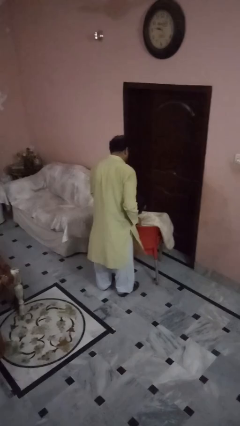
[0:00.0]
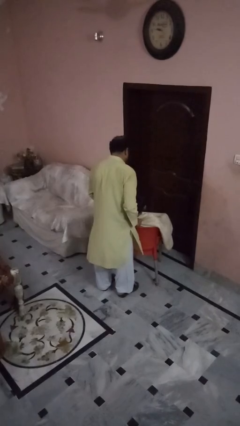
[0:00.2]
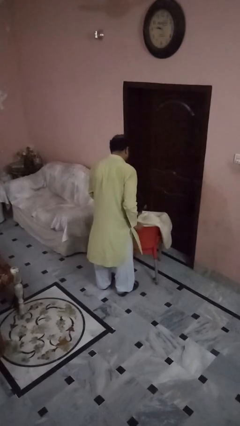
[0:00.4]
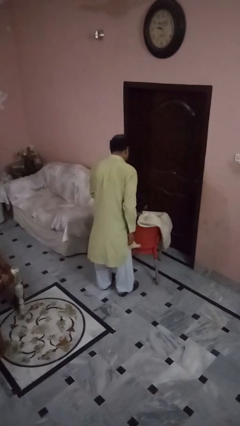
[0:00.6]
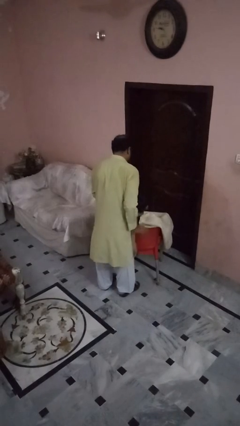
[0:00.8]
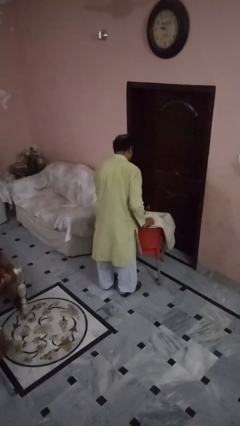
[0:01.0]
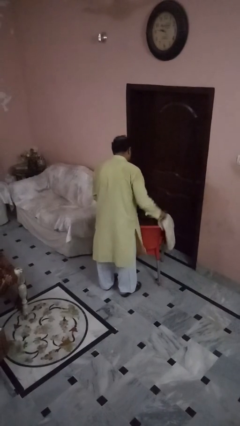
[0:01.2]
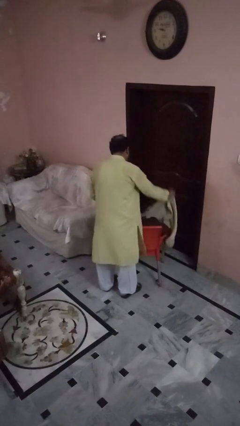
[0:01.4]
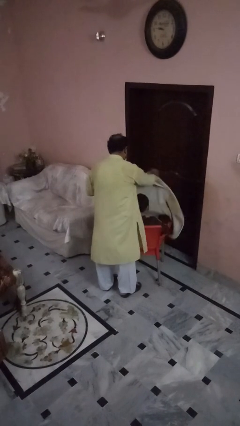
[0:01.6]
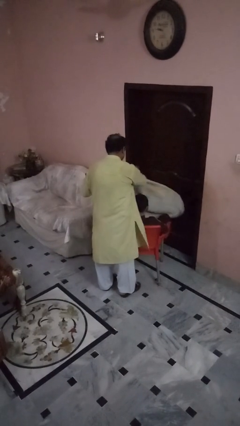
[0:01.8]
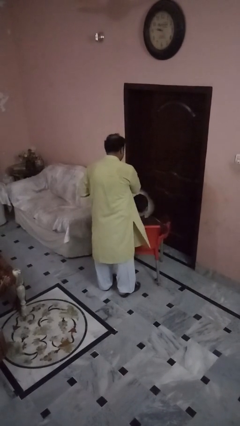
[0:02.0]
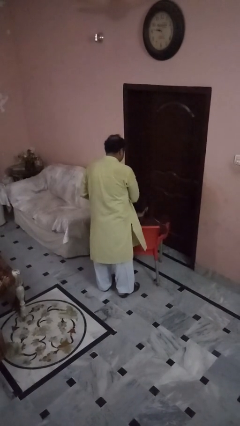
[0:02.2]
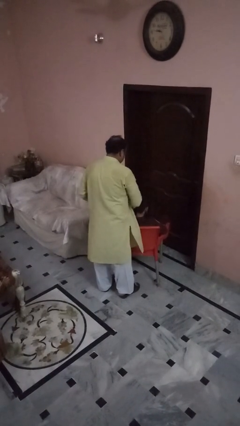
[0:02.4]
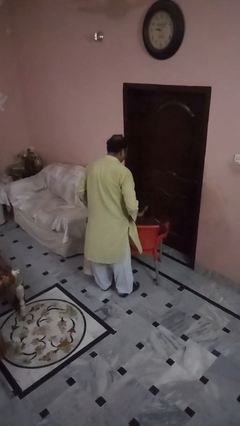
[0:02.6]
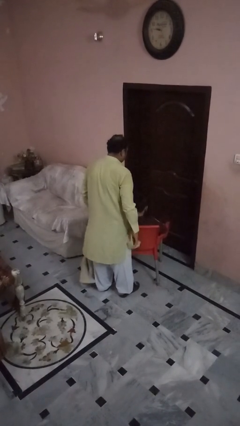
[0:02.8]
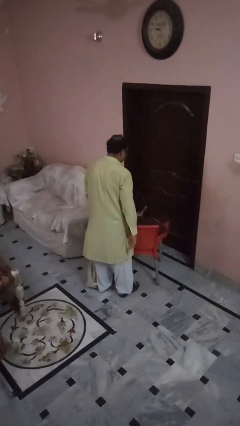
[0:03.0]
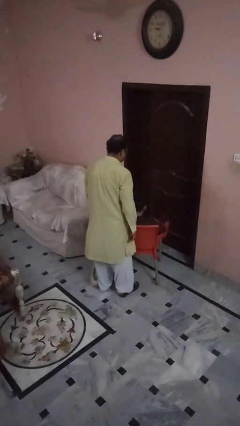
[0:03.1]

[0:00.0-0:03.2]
person uncovers friend with blanket

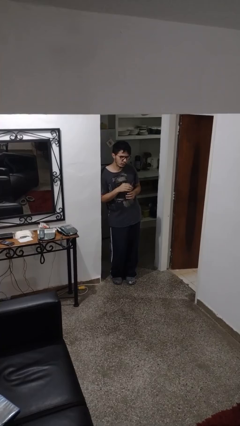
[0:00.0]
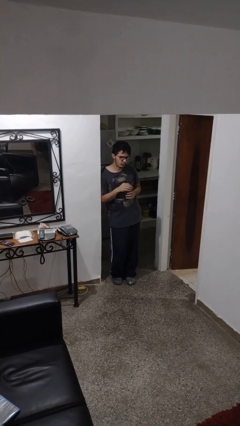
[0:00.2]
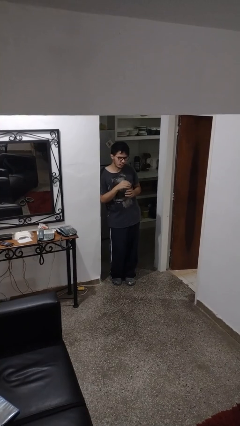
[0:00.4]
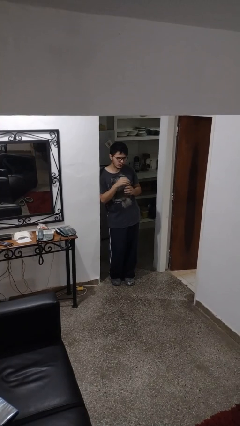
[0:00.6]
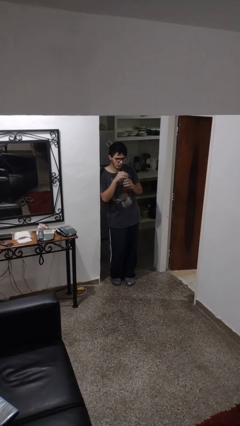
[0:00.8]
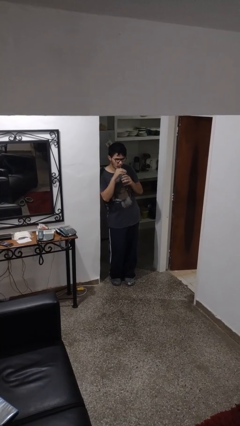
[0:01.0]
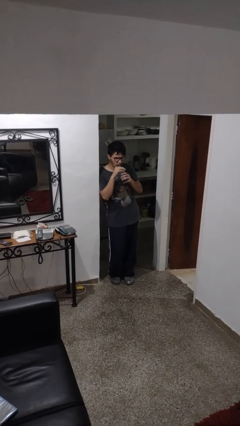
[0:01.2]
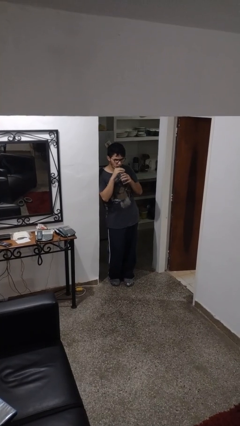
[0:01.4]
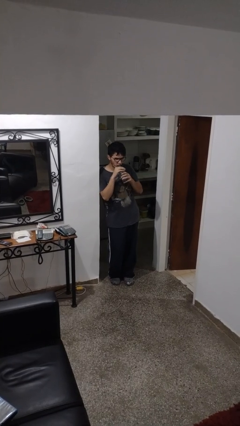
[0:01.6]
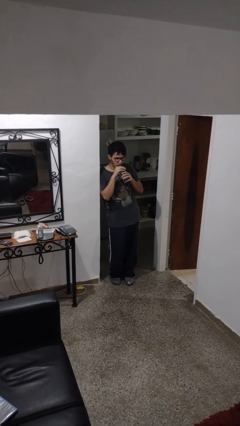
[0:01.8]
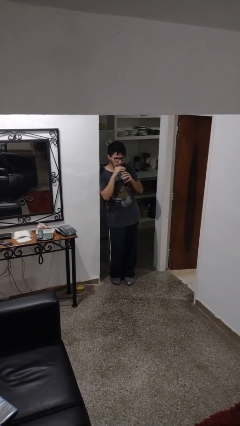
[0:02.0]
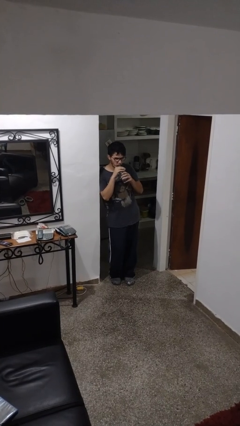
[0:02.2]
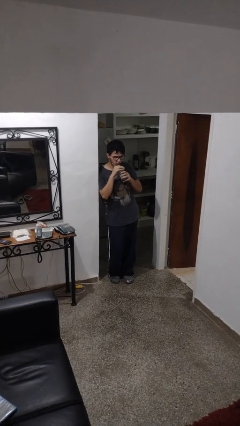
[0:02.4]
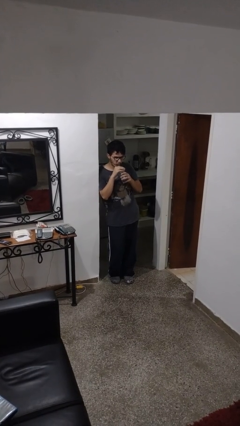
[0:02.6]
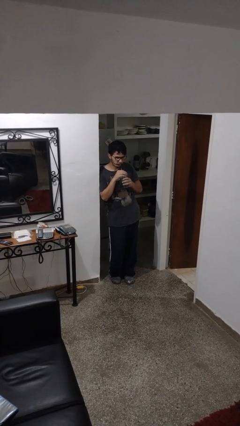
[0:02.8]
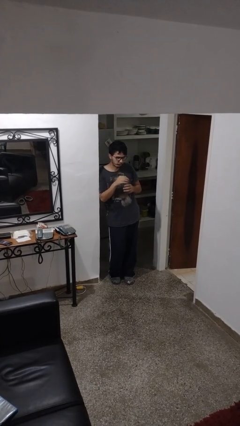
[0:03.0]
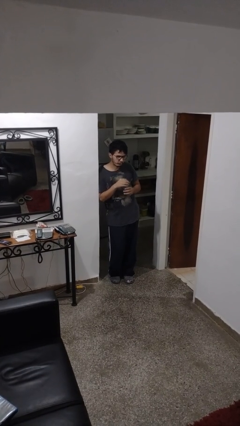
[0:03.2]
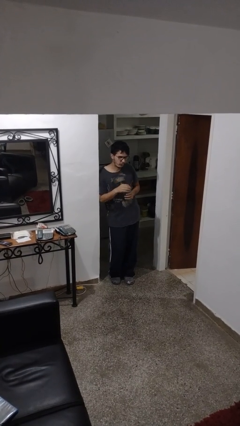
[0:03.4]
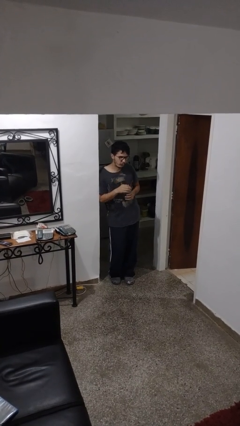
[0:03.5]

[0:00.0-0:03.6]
person drinks from straw

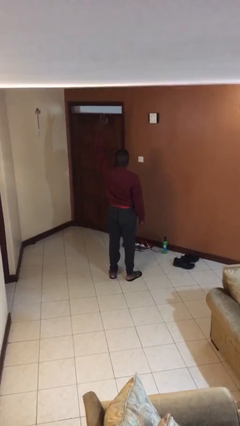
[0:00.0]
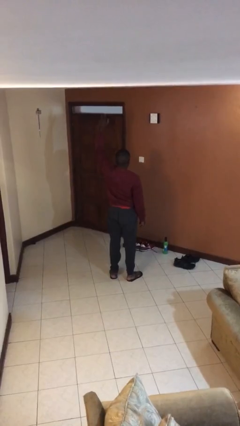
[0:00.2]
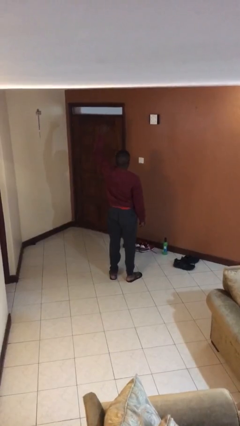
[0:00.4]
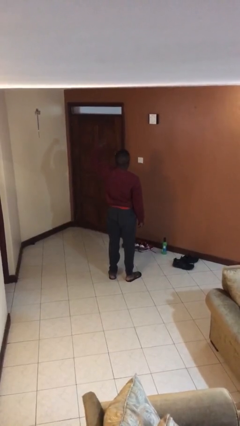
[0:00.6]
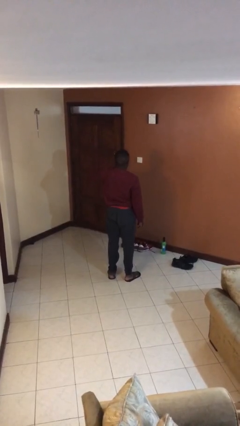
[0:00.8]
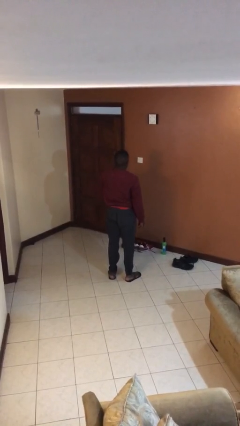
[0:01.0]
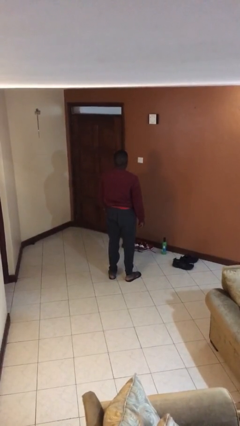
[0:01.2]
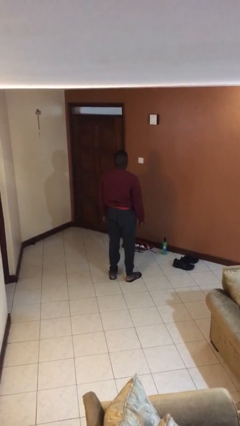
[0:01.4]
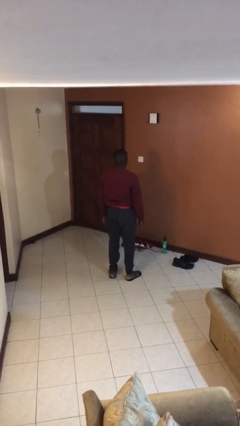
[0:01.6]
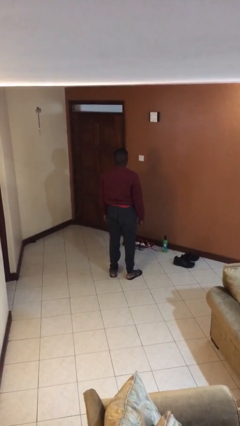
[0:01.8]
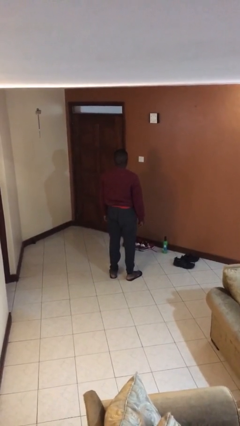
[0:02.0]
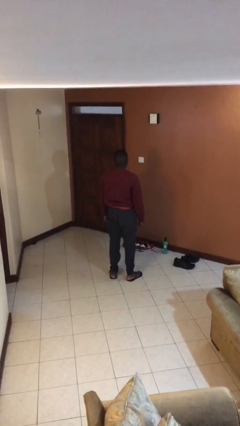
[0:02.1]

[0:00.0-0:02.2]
person gestures lower hand

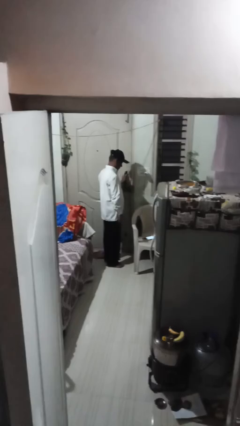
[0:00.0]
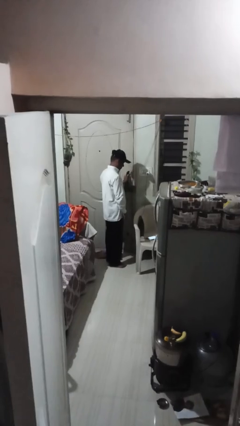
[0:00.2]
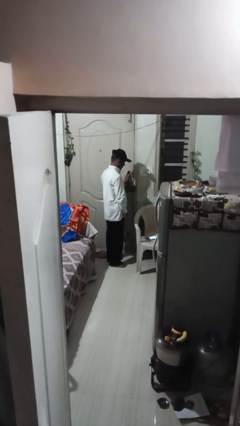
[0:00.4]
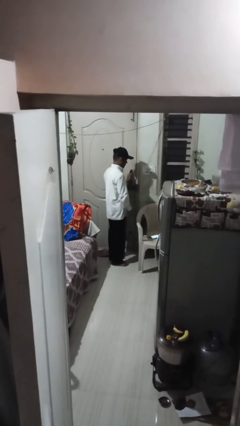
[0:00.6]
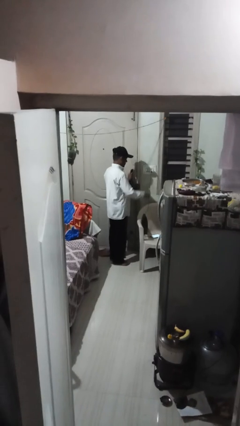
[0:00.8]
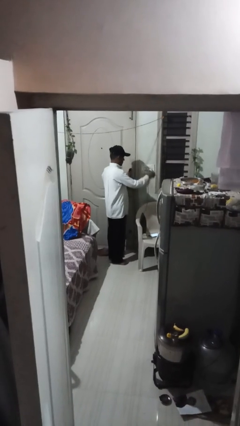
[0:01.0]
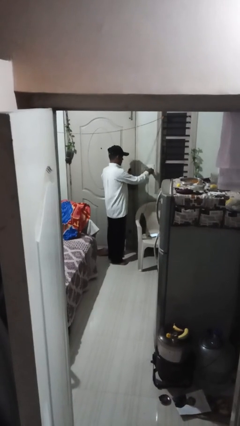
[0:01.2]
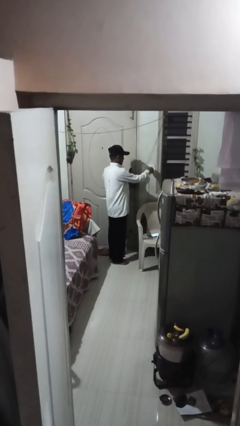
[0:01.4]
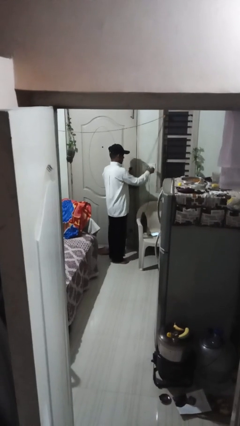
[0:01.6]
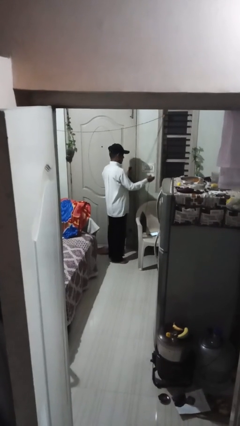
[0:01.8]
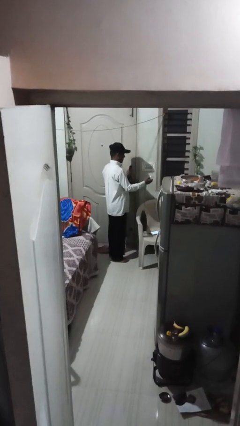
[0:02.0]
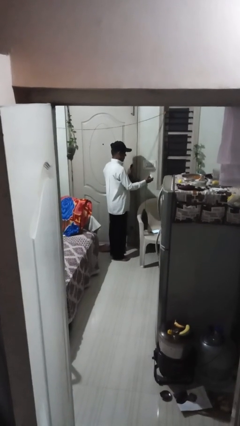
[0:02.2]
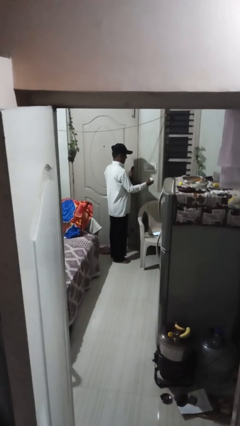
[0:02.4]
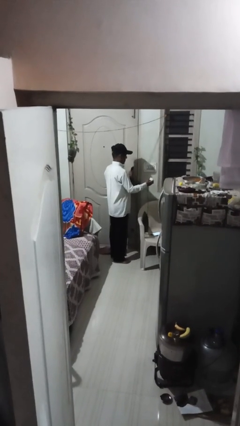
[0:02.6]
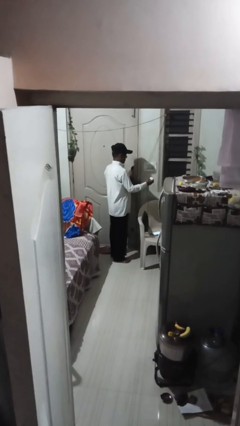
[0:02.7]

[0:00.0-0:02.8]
person unplugs from electrical socket

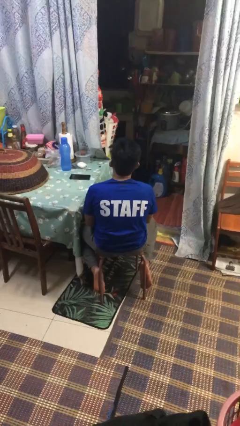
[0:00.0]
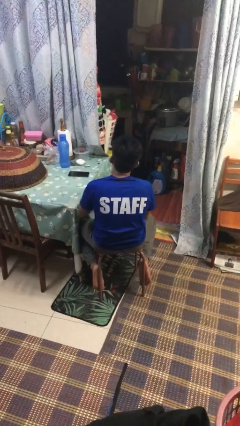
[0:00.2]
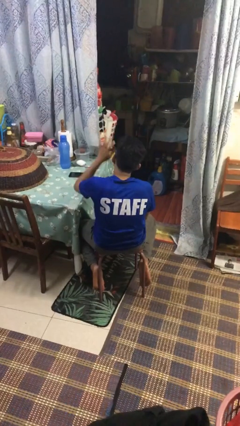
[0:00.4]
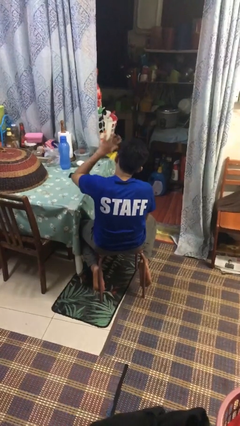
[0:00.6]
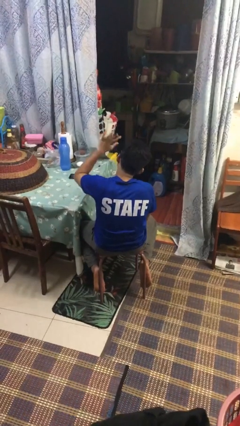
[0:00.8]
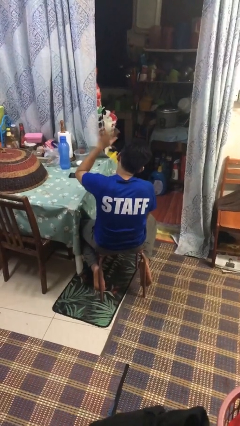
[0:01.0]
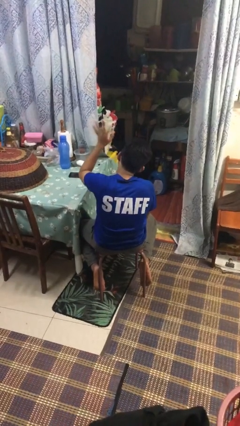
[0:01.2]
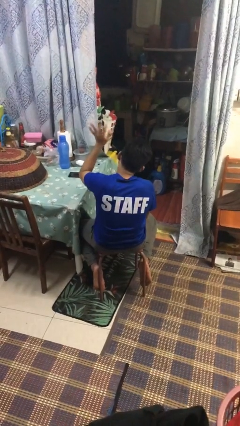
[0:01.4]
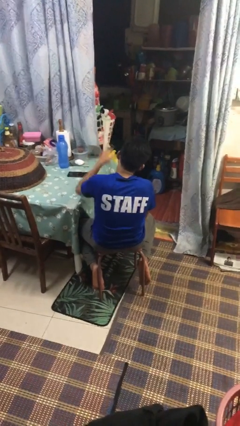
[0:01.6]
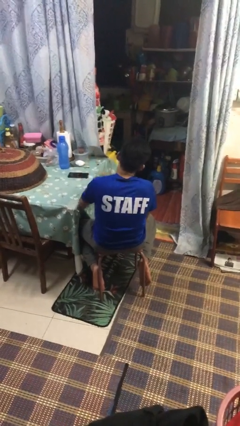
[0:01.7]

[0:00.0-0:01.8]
person waves at person

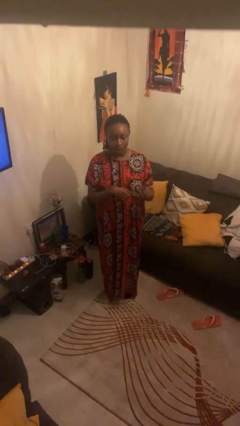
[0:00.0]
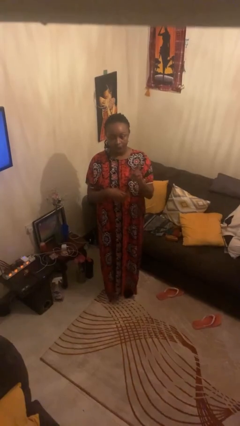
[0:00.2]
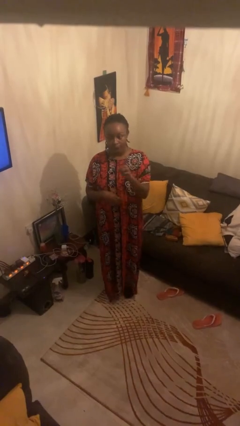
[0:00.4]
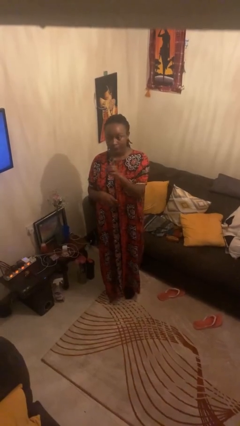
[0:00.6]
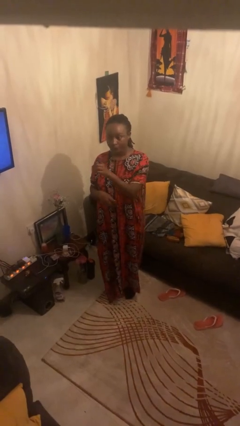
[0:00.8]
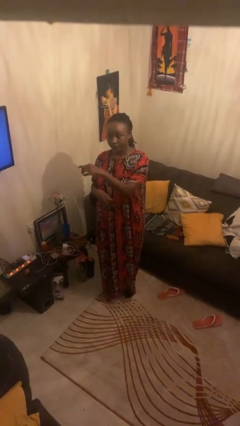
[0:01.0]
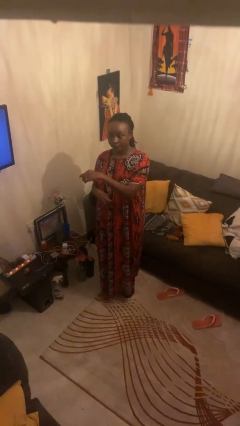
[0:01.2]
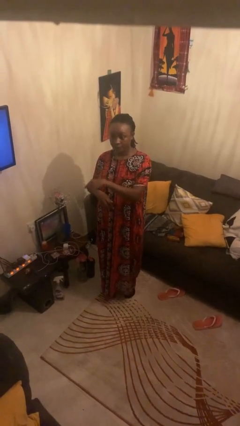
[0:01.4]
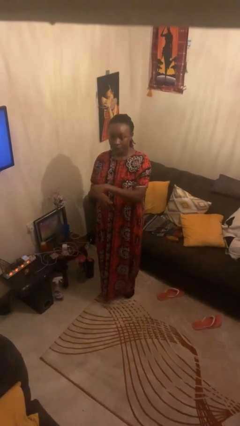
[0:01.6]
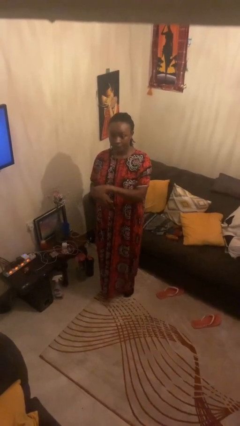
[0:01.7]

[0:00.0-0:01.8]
person gestures swipe right

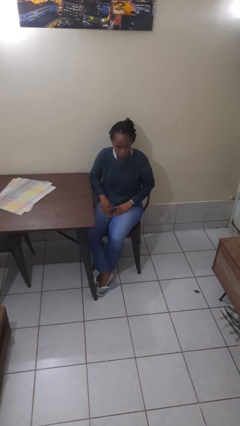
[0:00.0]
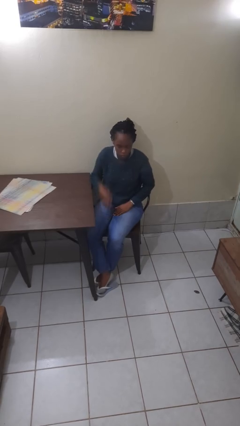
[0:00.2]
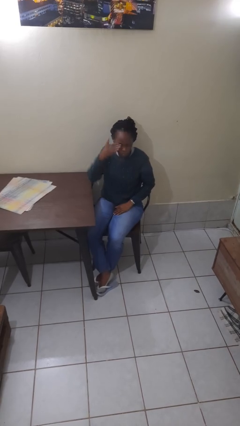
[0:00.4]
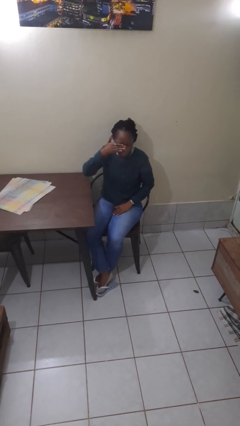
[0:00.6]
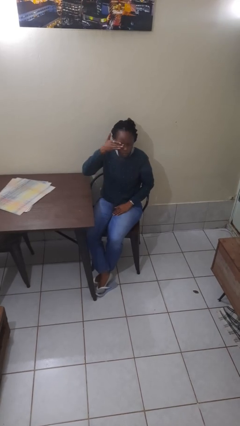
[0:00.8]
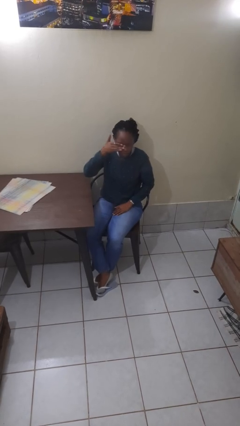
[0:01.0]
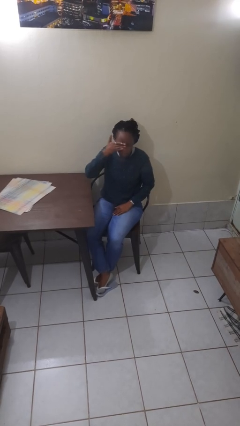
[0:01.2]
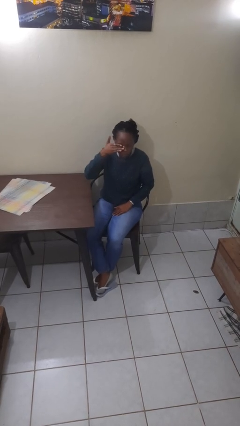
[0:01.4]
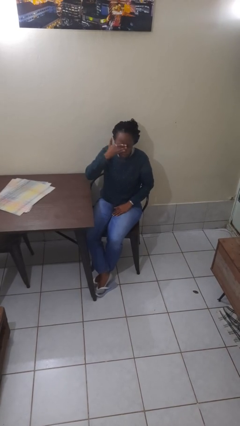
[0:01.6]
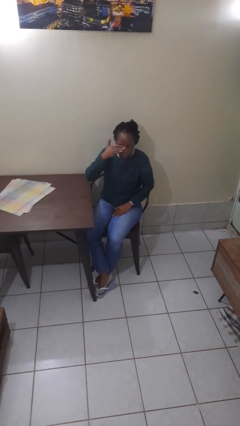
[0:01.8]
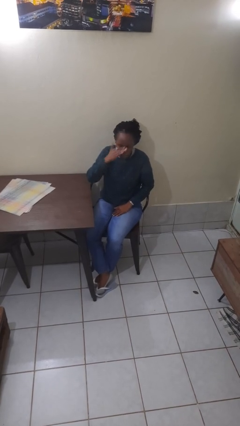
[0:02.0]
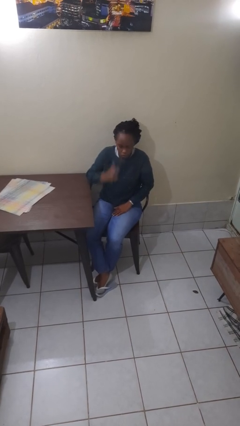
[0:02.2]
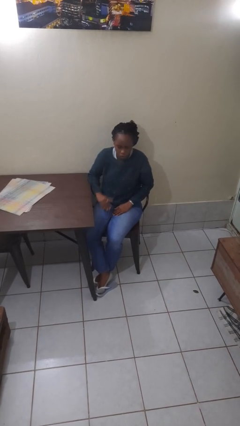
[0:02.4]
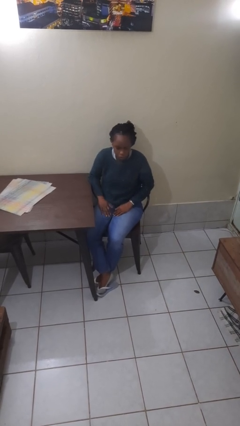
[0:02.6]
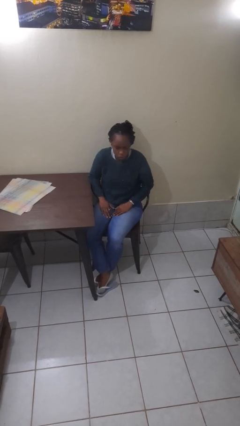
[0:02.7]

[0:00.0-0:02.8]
person rubs eyes
